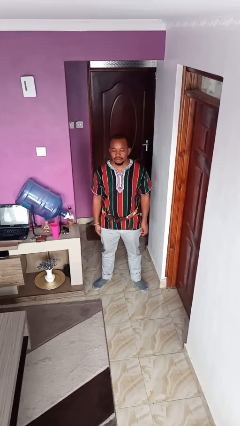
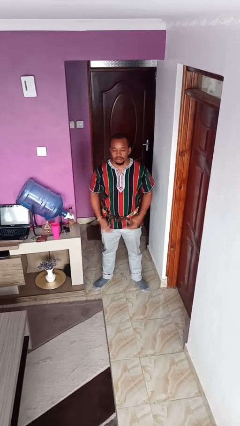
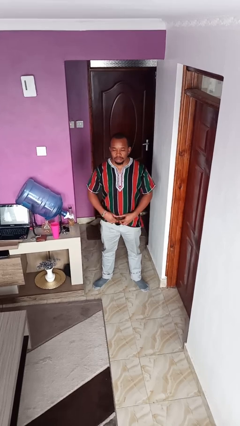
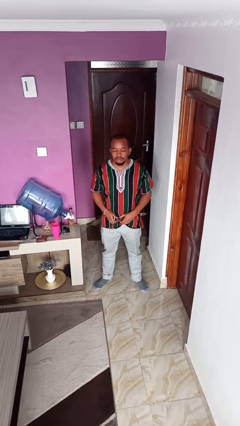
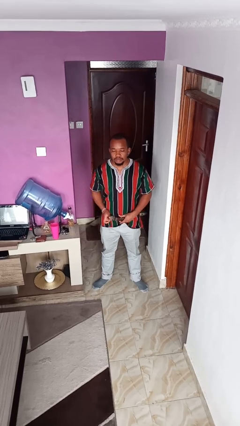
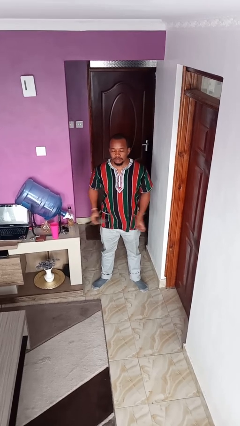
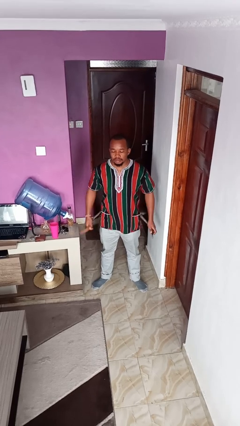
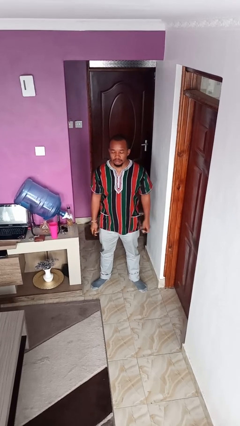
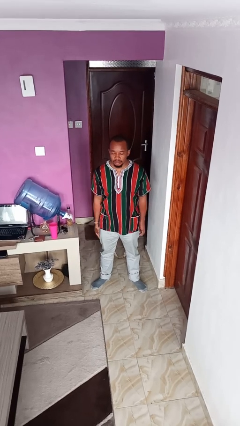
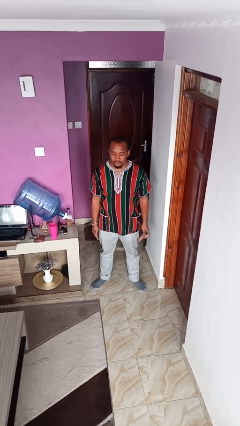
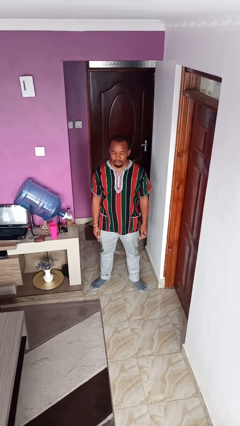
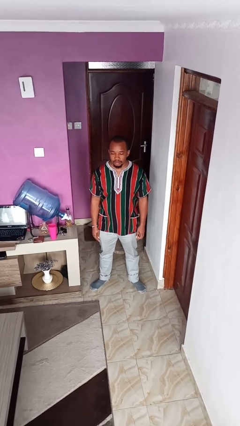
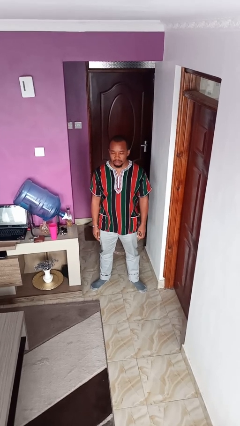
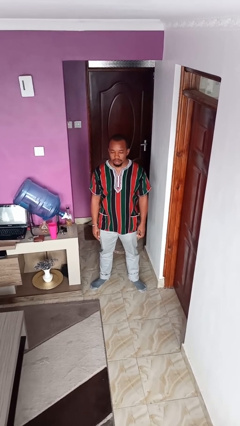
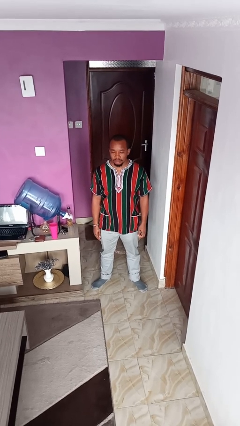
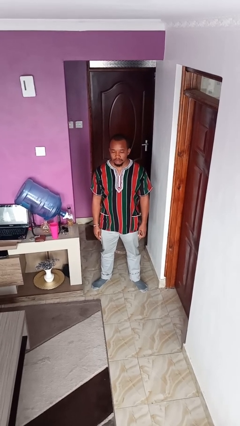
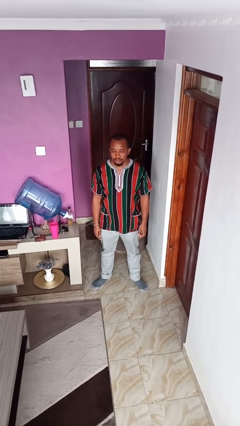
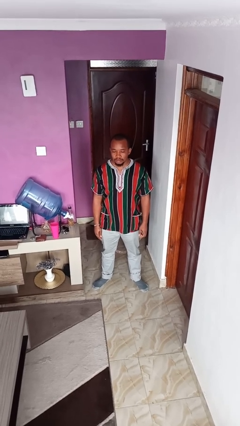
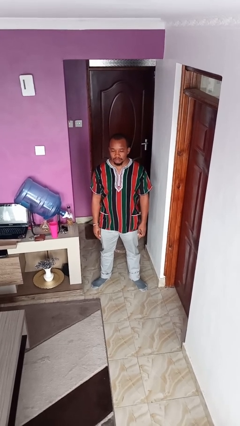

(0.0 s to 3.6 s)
person takes off belt

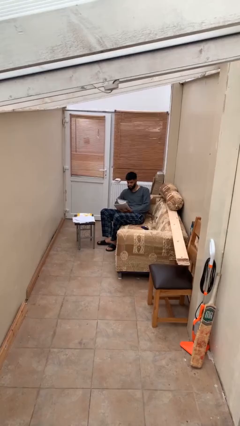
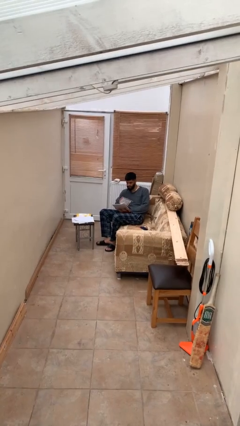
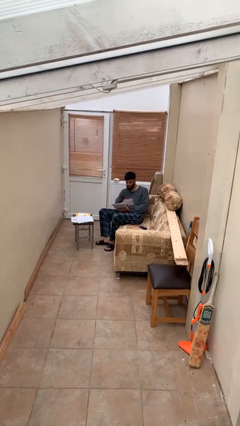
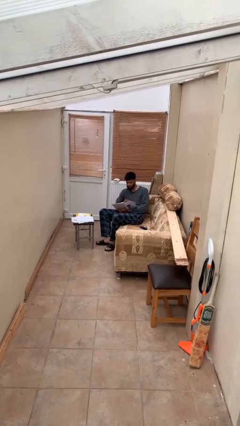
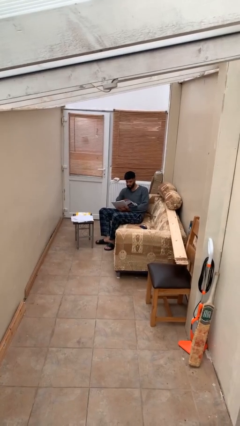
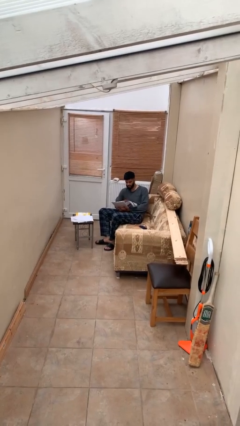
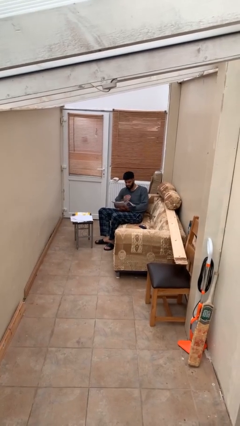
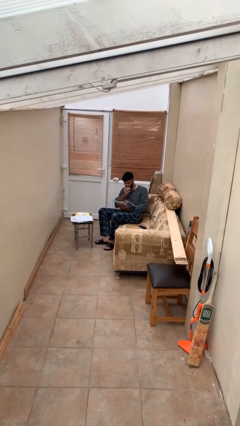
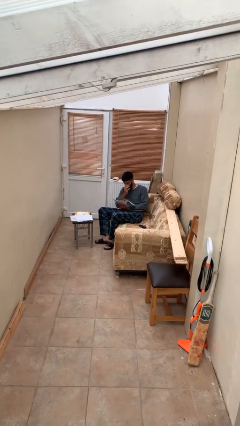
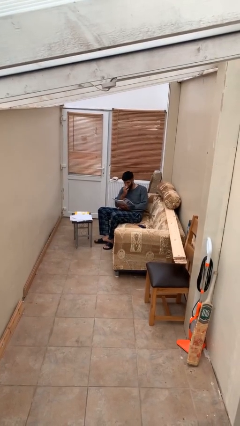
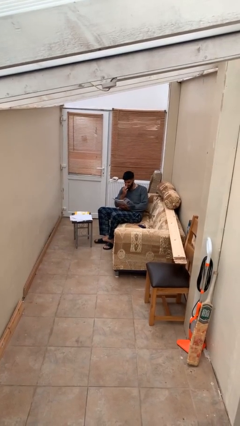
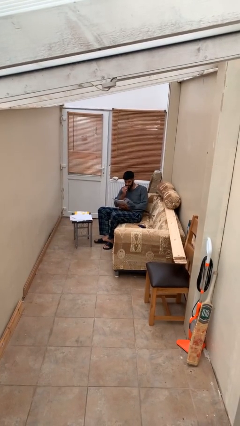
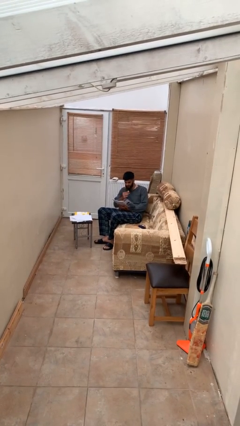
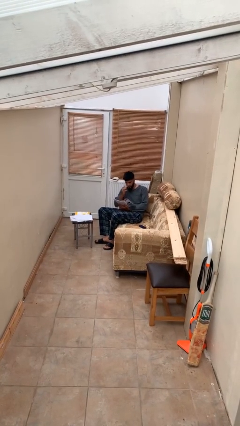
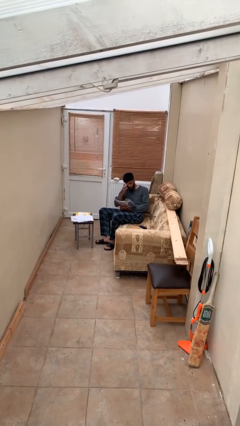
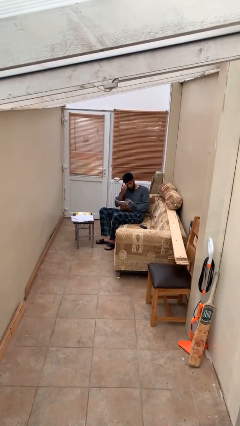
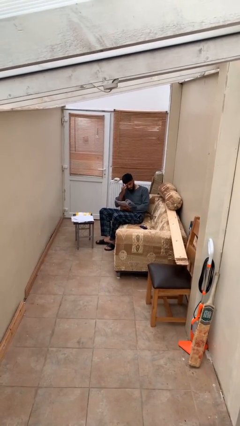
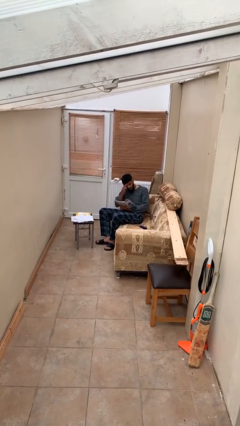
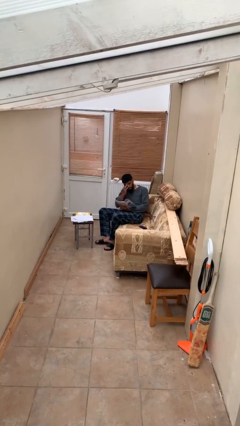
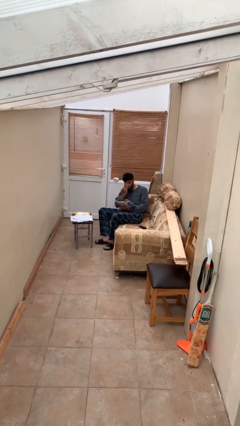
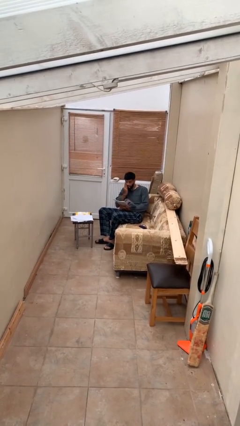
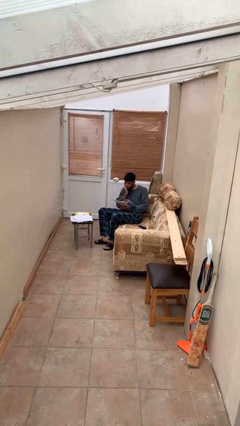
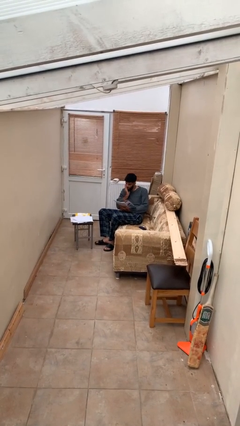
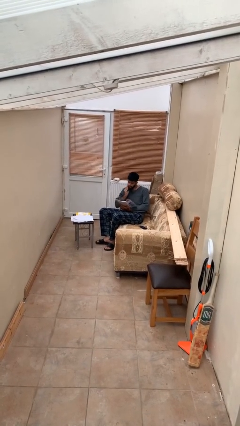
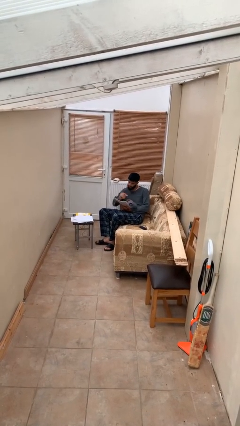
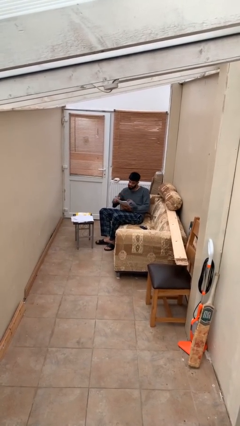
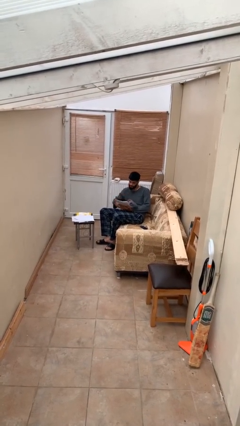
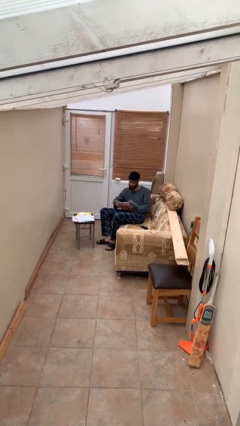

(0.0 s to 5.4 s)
person reads document

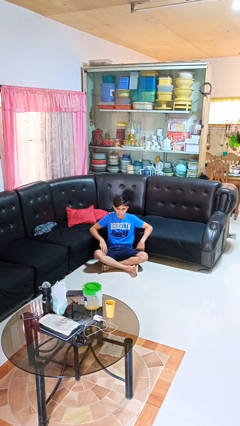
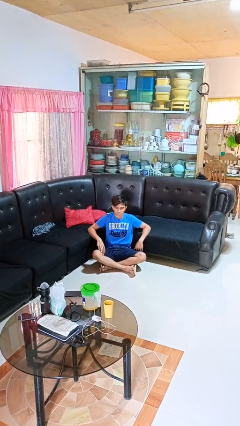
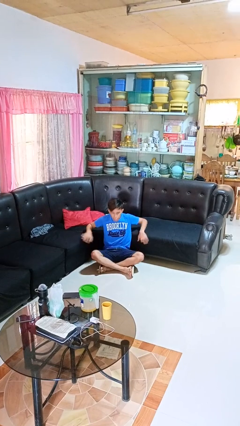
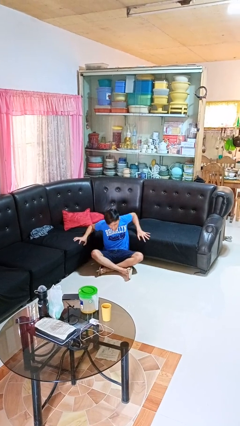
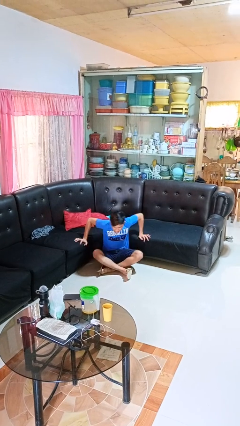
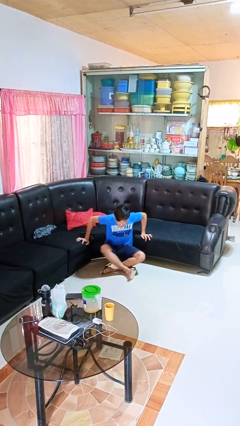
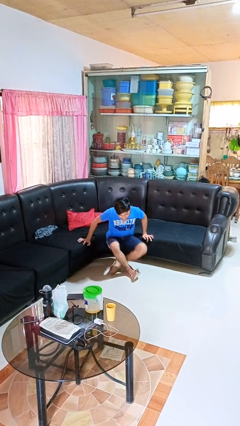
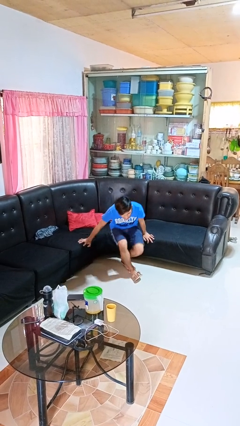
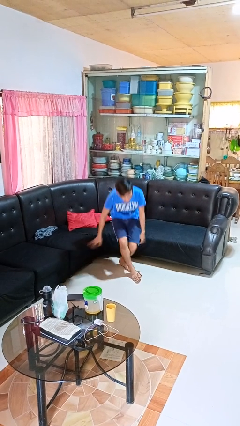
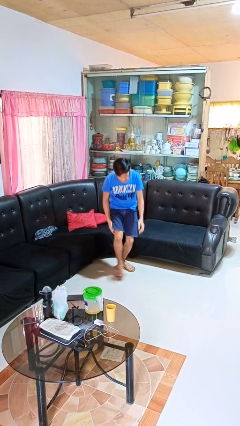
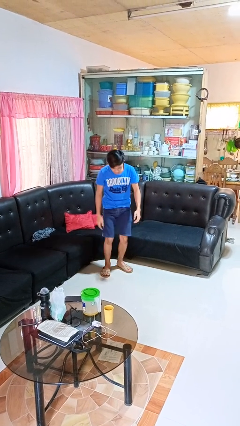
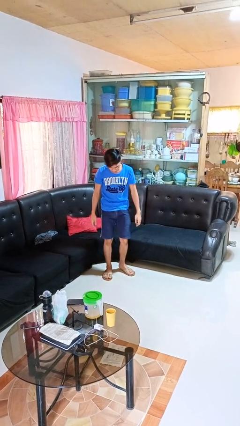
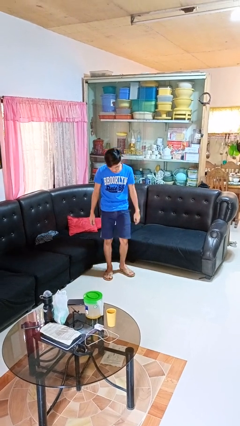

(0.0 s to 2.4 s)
person stands up from floor

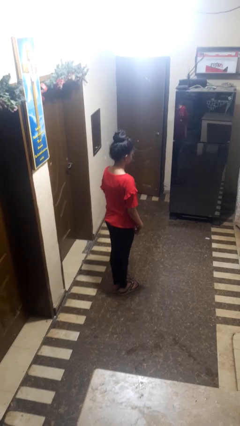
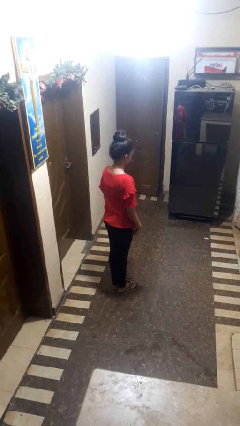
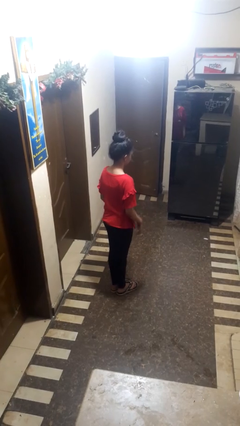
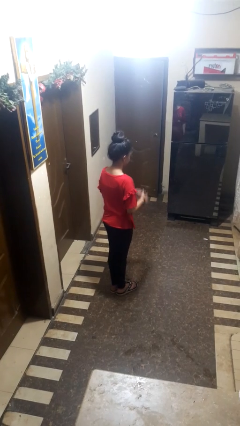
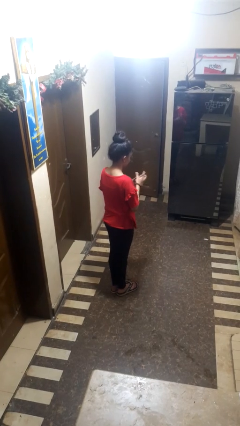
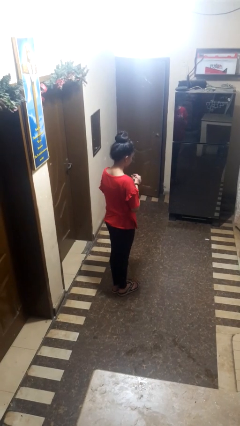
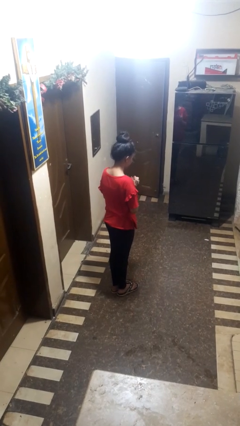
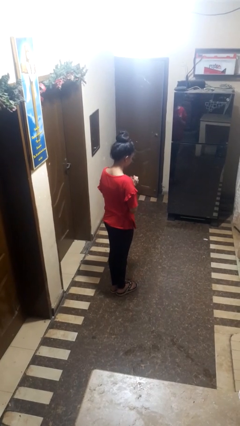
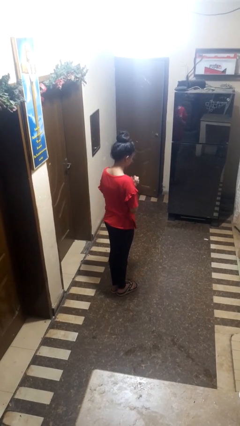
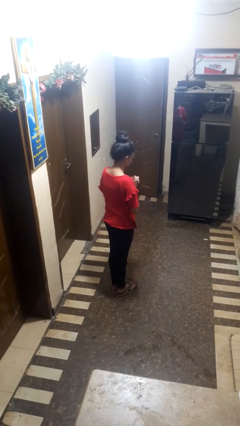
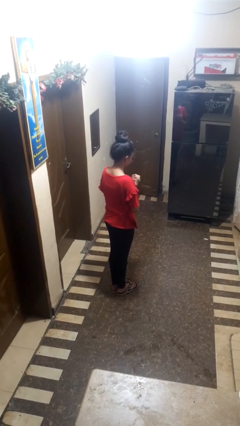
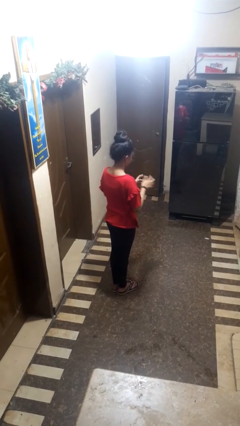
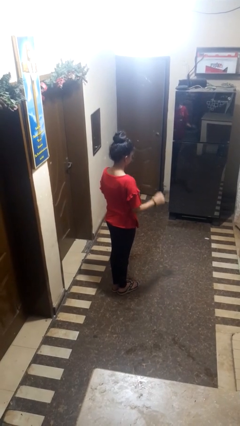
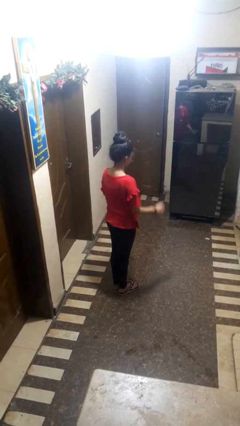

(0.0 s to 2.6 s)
person prays

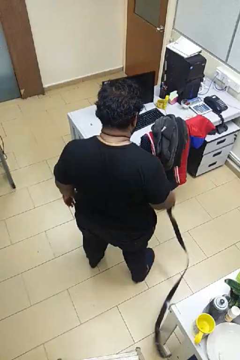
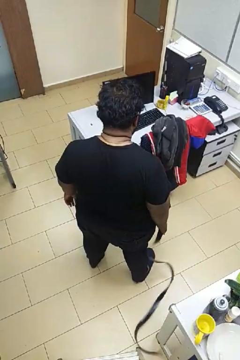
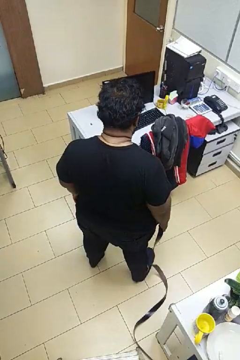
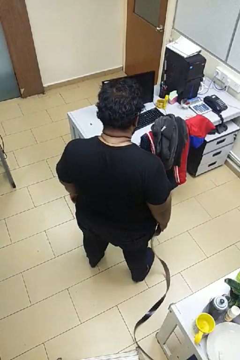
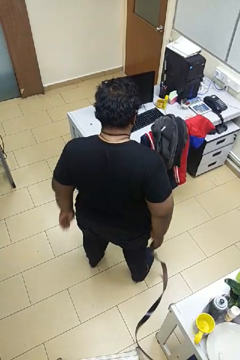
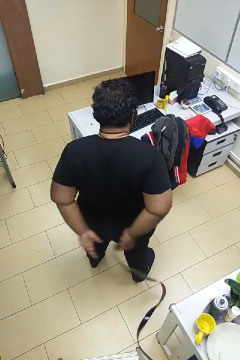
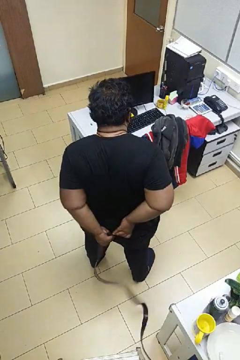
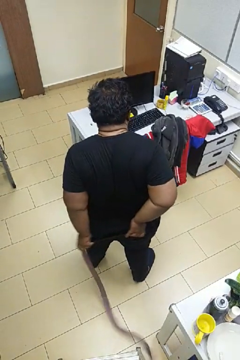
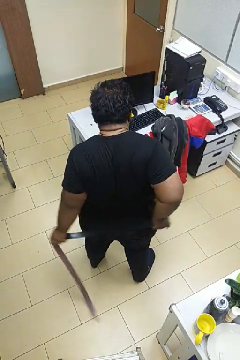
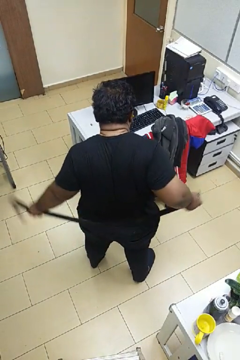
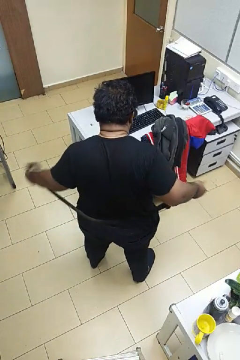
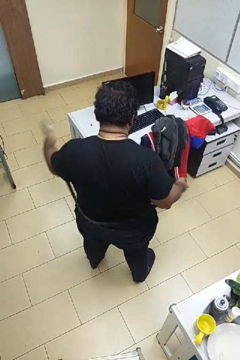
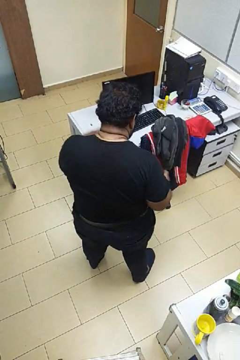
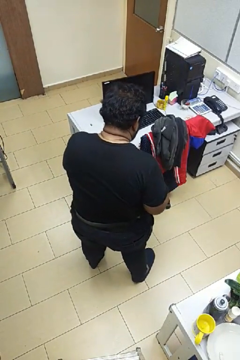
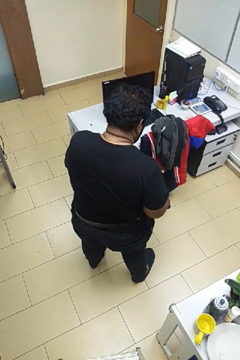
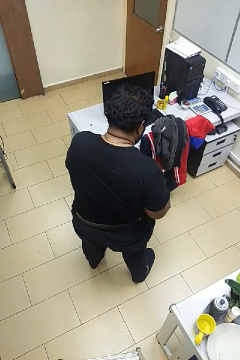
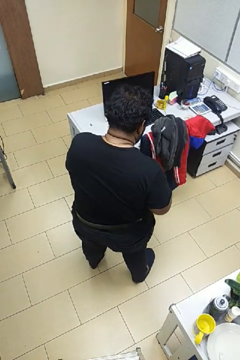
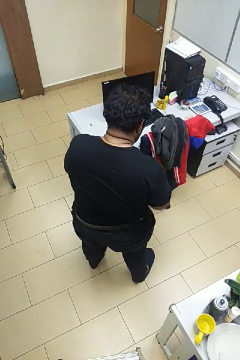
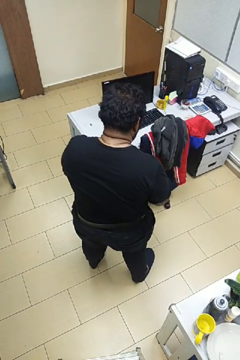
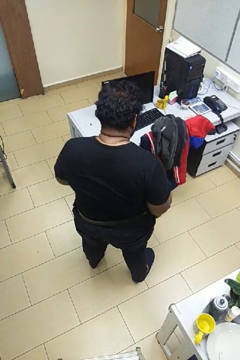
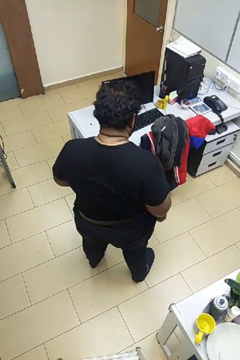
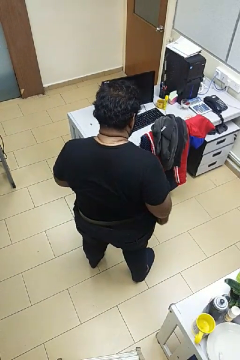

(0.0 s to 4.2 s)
person puts on belt

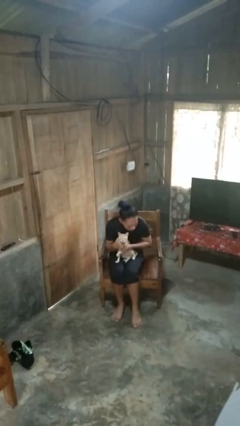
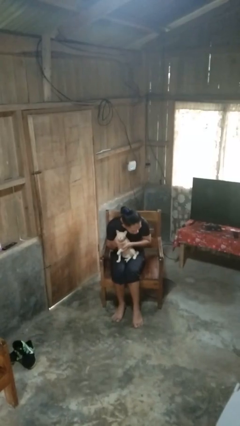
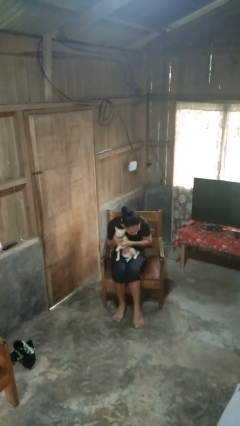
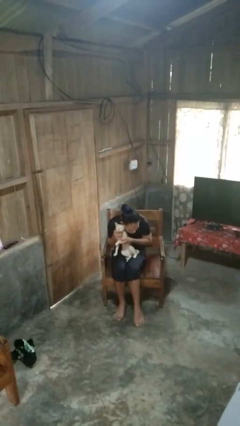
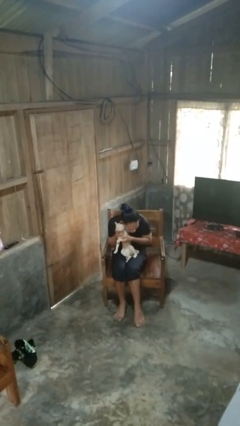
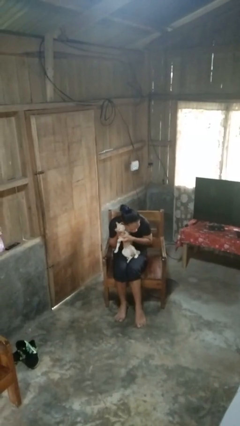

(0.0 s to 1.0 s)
person hugs cat
